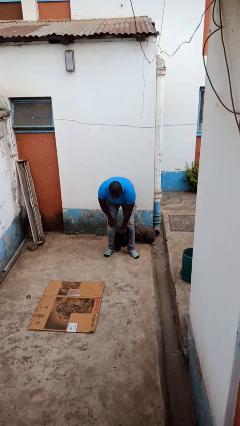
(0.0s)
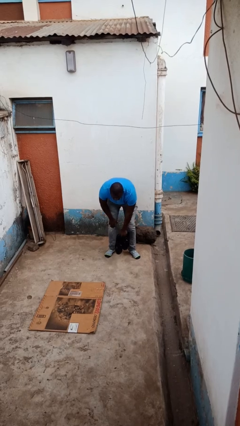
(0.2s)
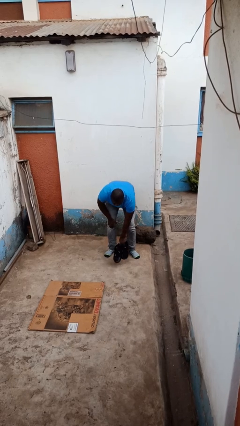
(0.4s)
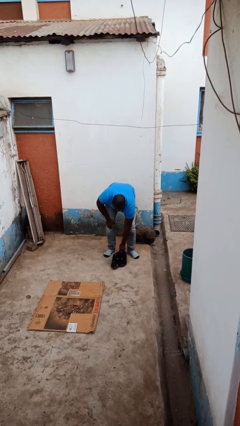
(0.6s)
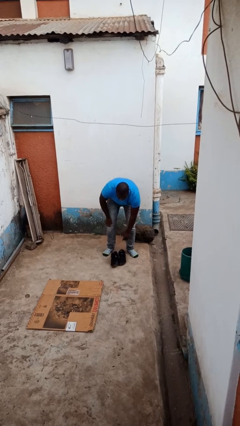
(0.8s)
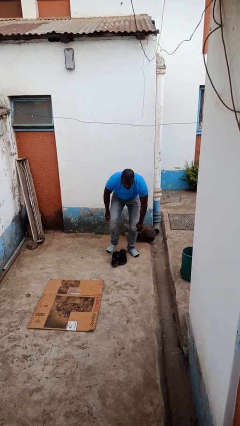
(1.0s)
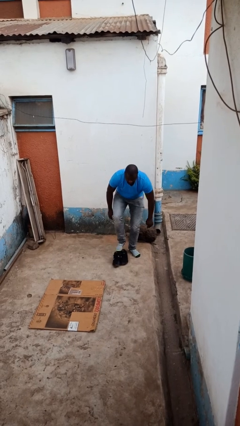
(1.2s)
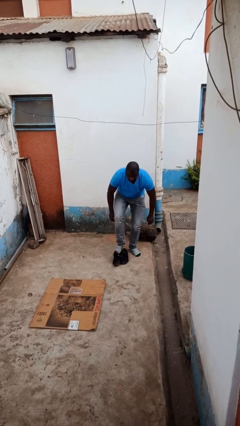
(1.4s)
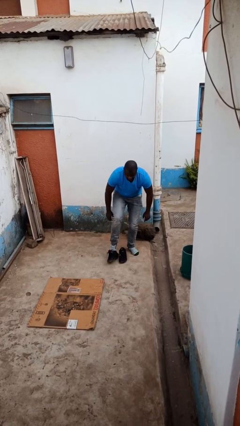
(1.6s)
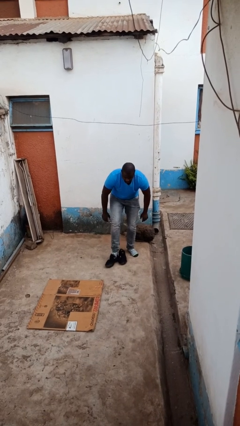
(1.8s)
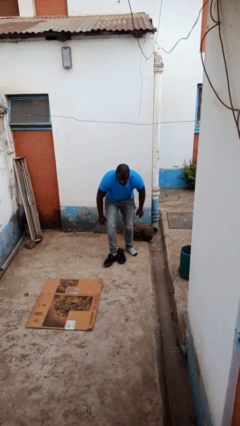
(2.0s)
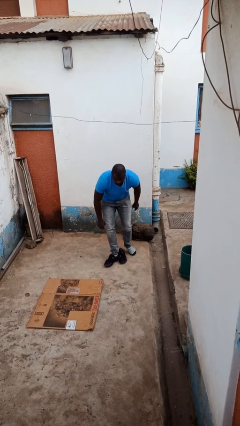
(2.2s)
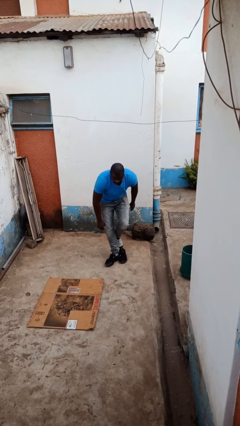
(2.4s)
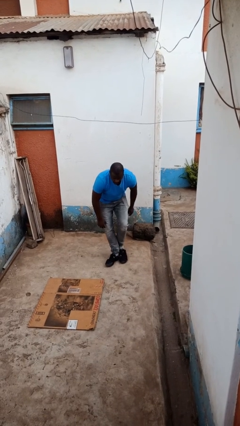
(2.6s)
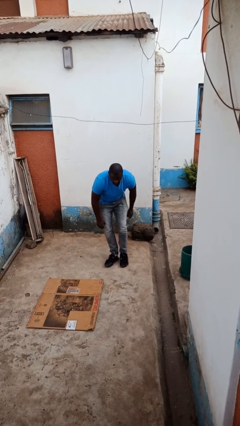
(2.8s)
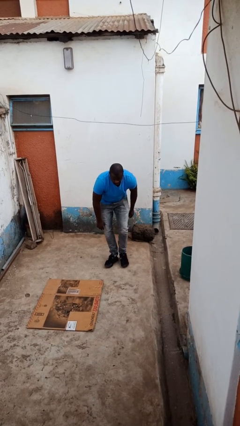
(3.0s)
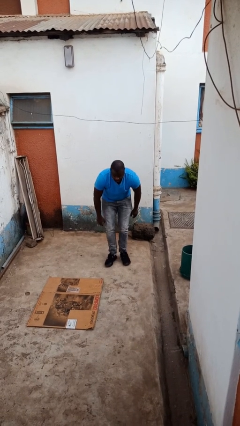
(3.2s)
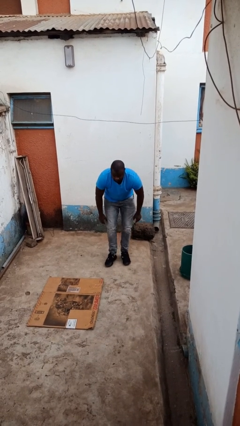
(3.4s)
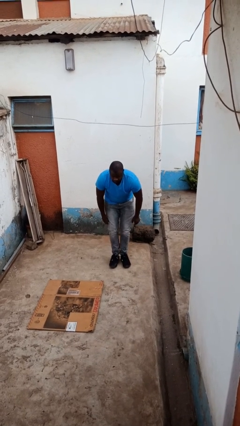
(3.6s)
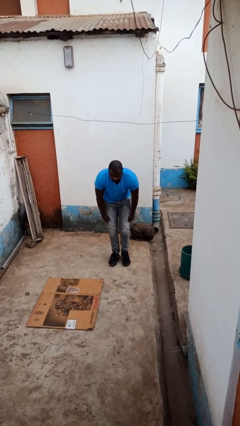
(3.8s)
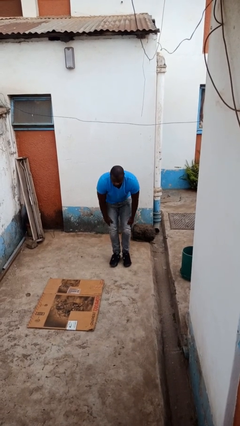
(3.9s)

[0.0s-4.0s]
person puts on shoes

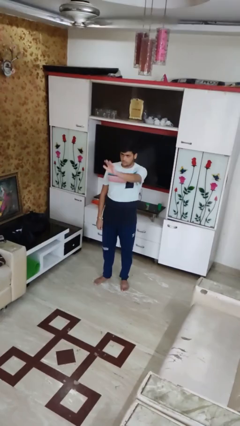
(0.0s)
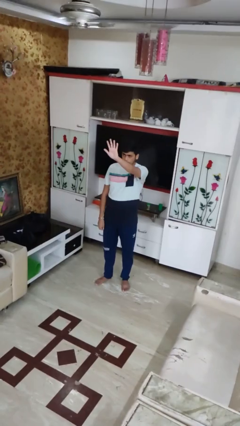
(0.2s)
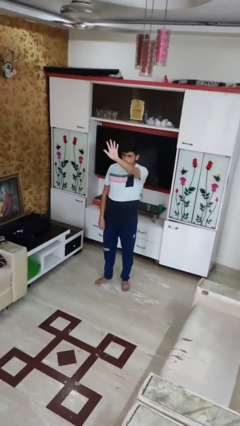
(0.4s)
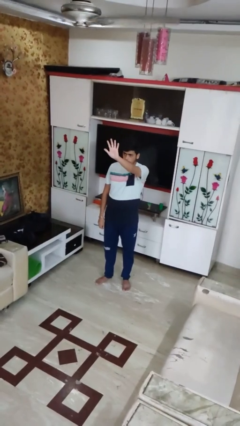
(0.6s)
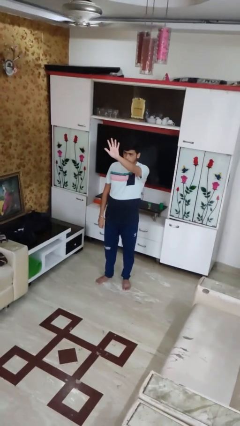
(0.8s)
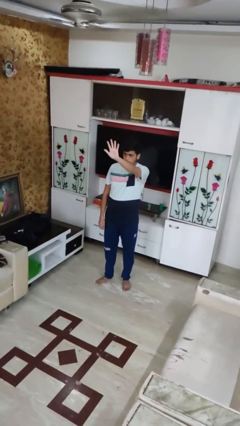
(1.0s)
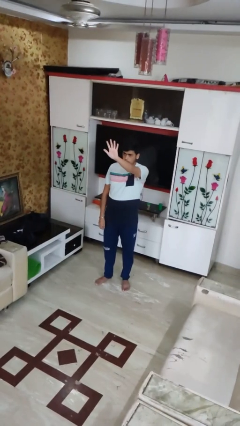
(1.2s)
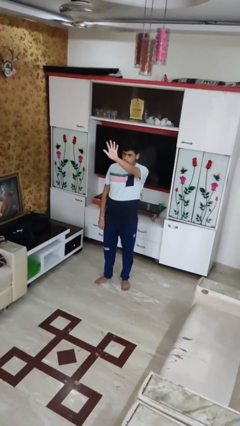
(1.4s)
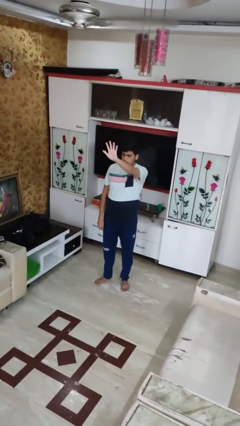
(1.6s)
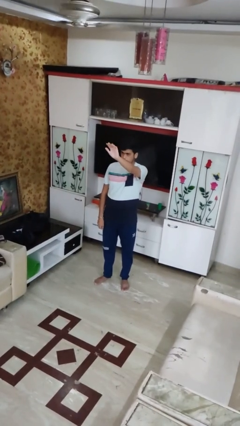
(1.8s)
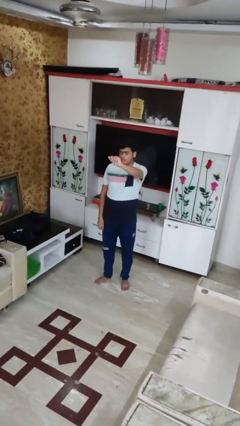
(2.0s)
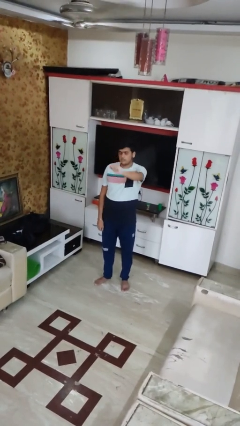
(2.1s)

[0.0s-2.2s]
person gestures number five

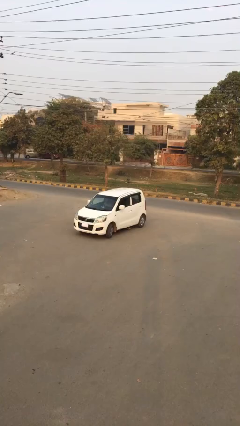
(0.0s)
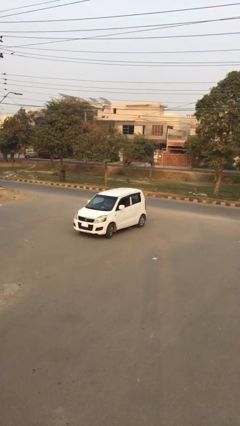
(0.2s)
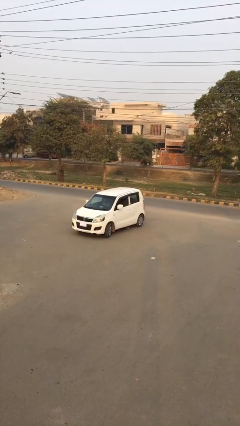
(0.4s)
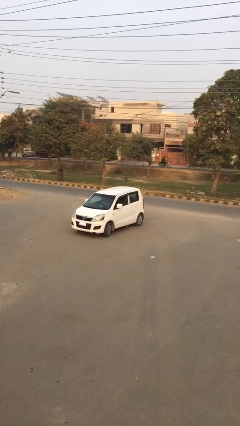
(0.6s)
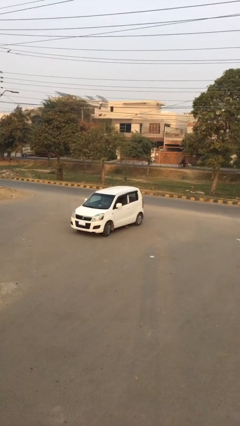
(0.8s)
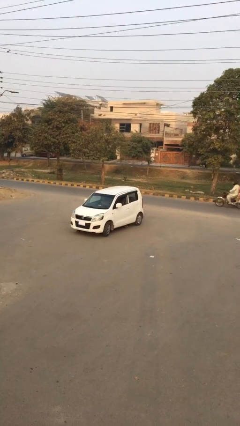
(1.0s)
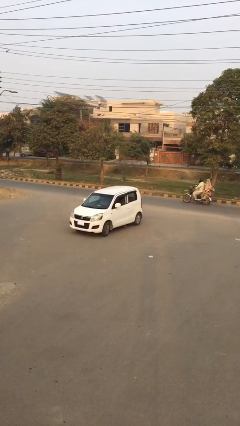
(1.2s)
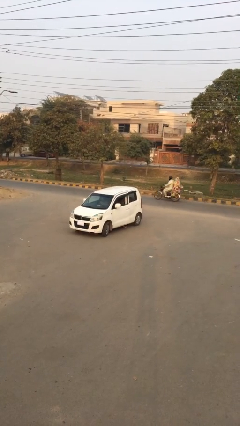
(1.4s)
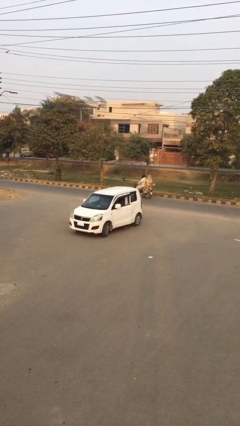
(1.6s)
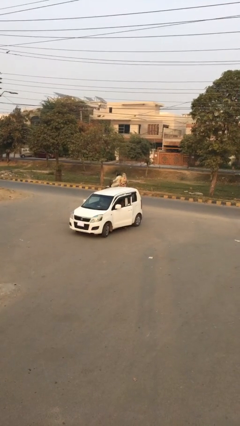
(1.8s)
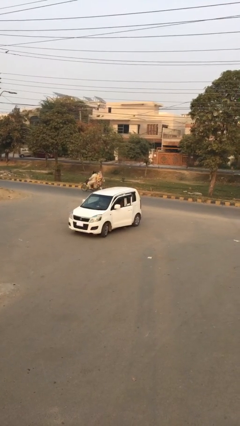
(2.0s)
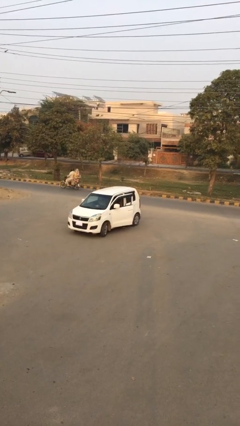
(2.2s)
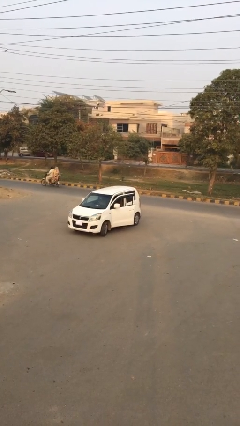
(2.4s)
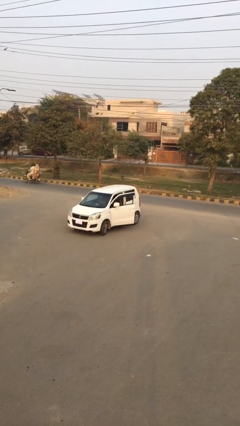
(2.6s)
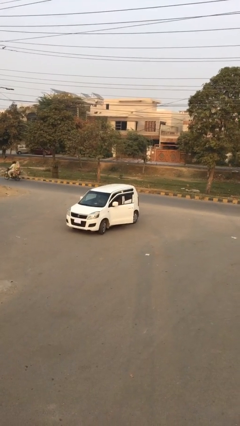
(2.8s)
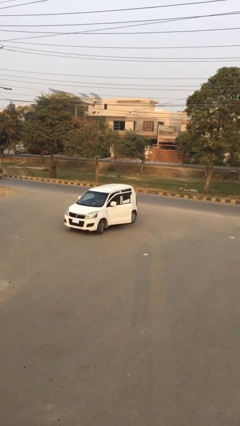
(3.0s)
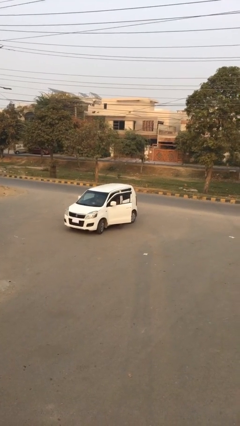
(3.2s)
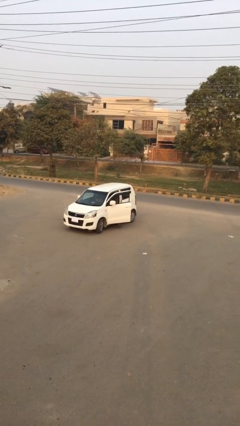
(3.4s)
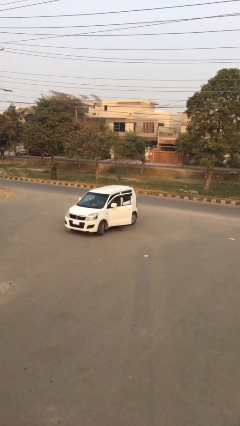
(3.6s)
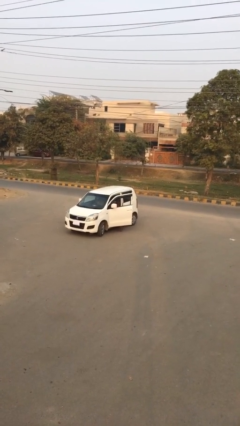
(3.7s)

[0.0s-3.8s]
person opens car door

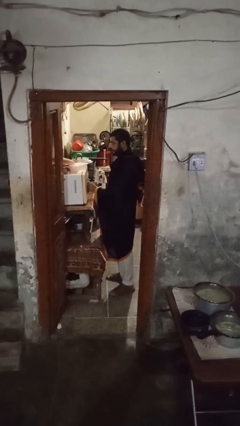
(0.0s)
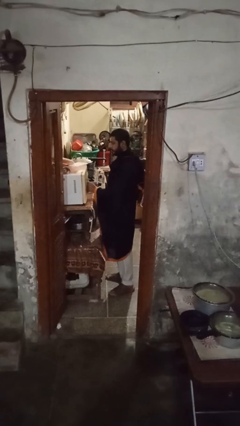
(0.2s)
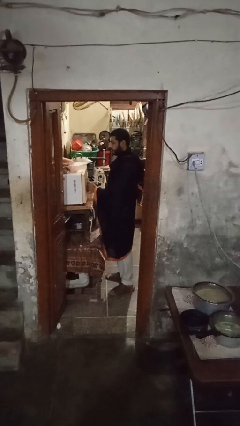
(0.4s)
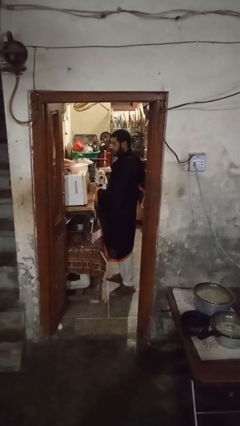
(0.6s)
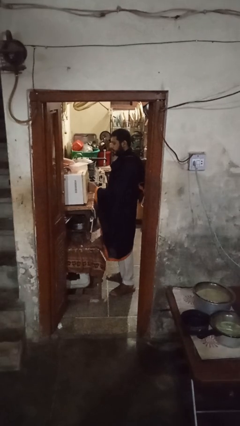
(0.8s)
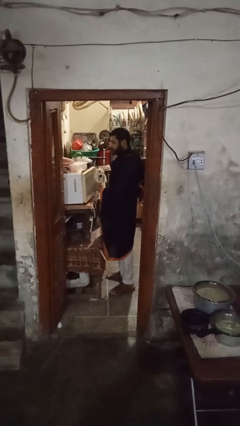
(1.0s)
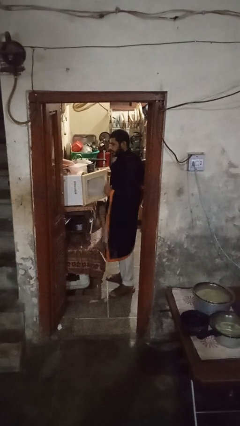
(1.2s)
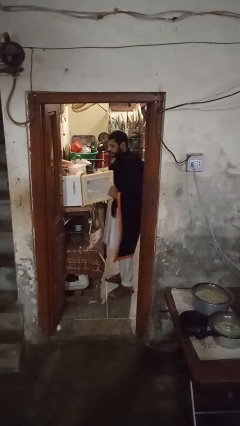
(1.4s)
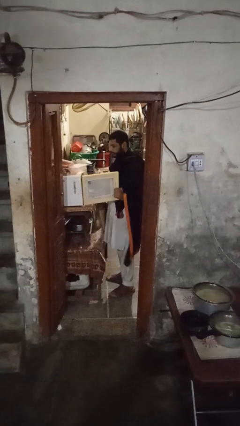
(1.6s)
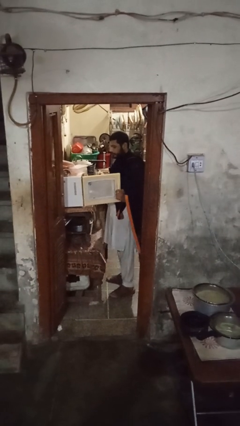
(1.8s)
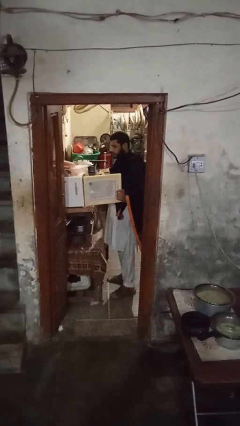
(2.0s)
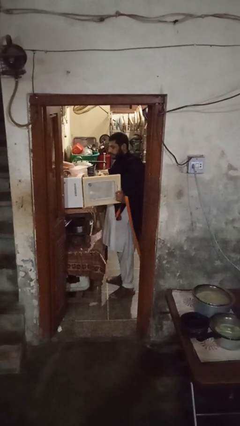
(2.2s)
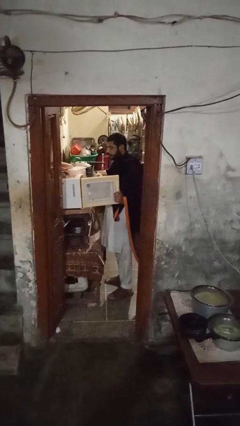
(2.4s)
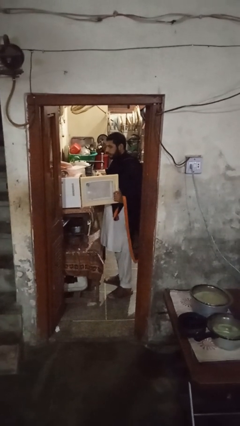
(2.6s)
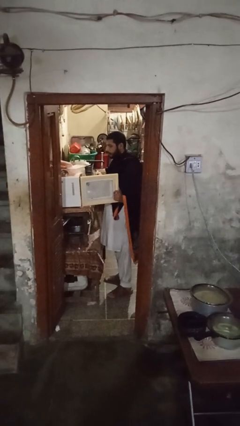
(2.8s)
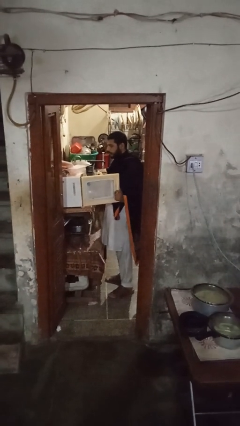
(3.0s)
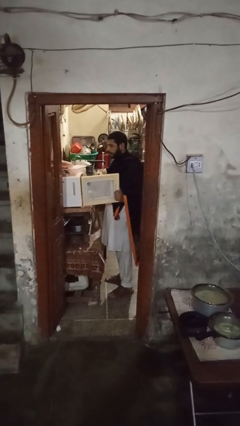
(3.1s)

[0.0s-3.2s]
person opens microwave

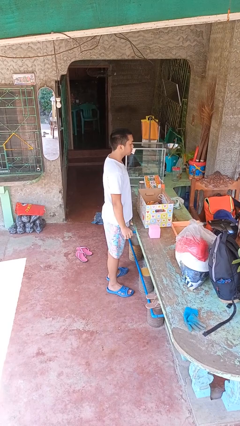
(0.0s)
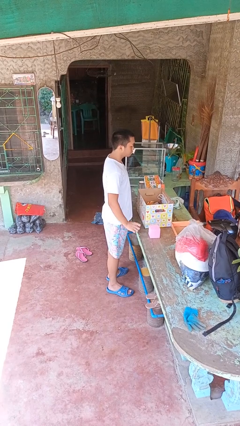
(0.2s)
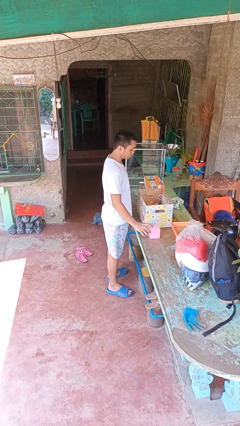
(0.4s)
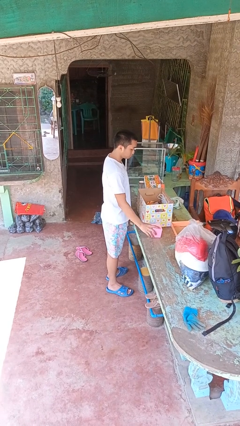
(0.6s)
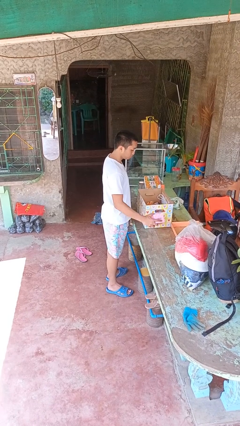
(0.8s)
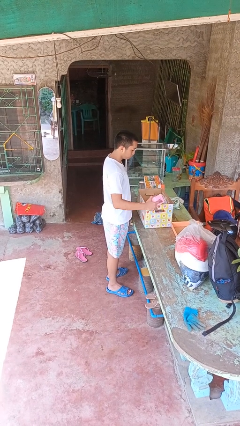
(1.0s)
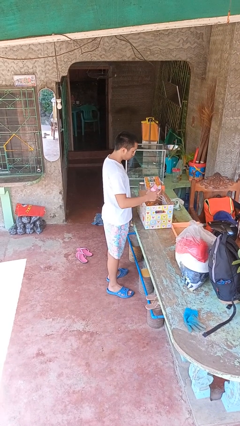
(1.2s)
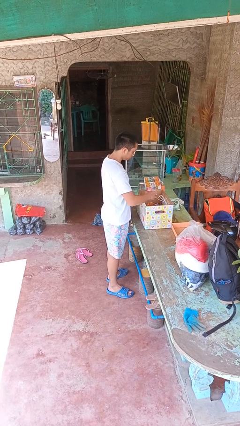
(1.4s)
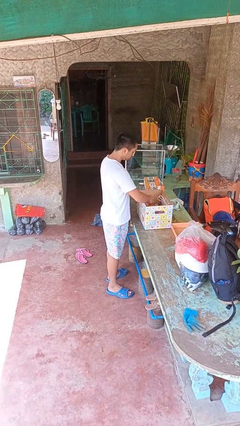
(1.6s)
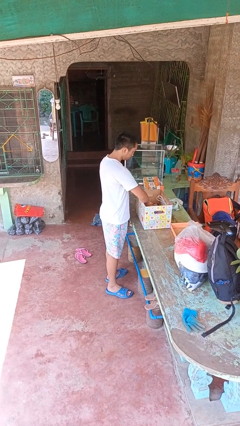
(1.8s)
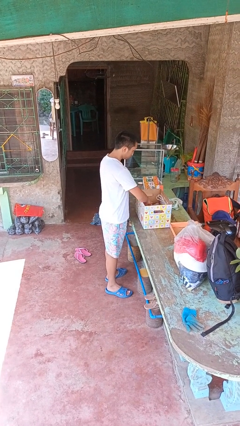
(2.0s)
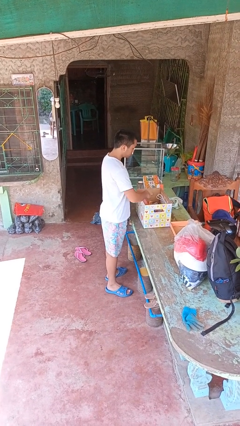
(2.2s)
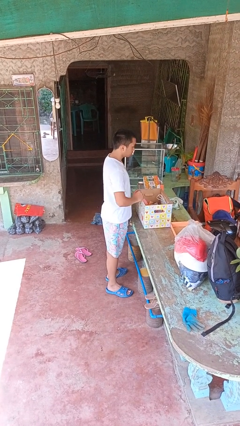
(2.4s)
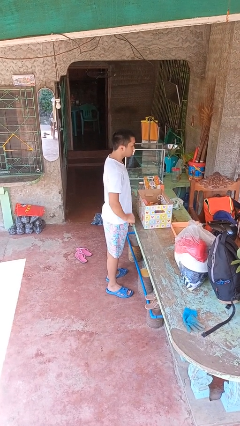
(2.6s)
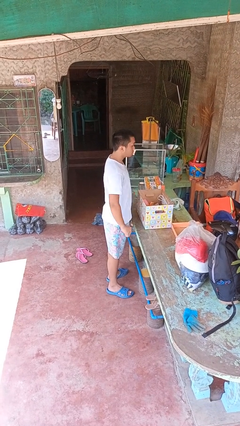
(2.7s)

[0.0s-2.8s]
person puts object into box

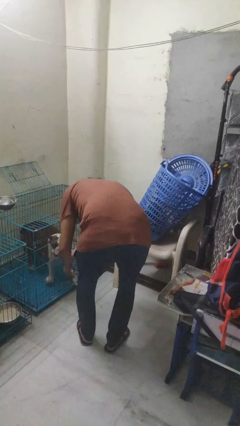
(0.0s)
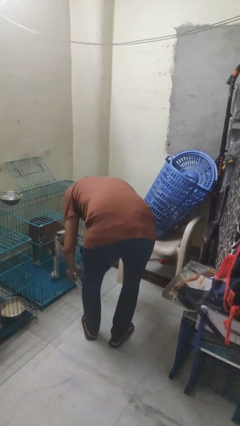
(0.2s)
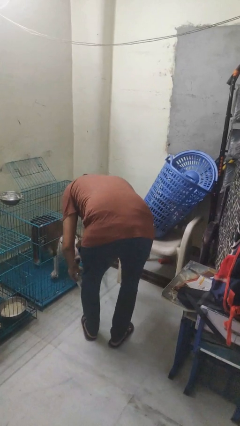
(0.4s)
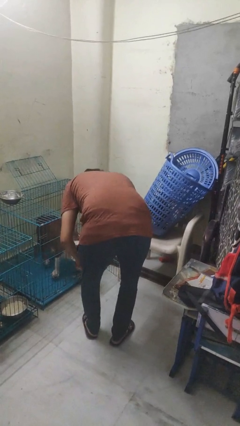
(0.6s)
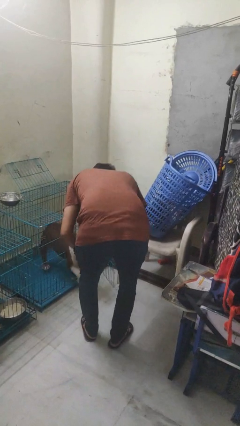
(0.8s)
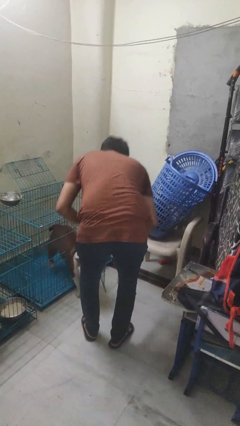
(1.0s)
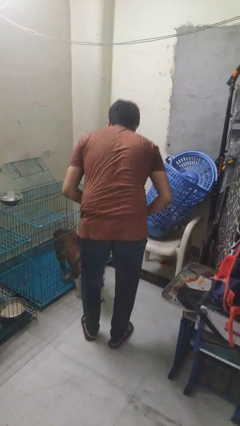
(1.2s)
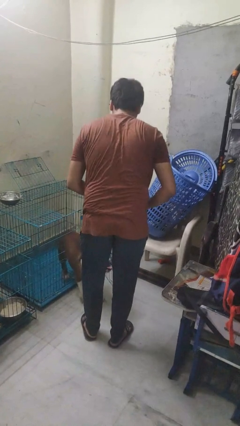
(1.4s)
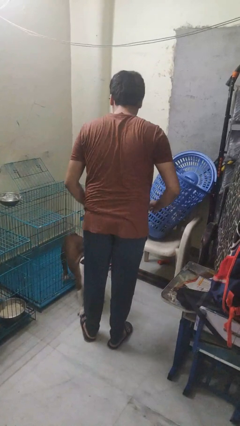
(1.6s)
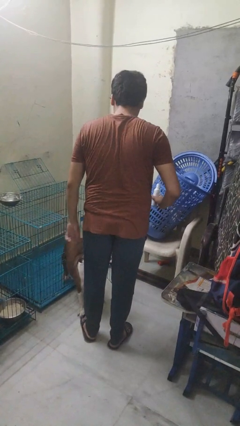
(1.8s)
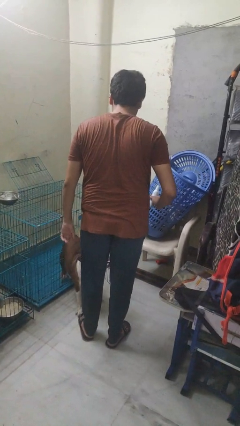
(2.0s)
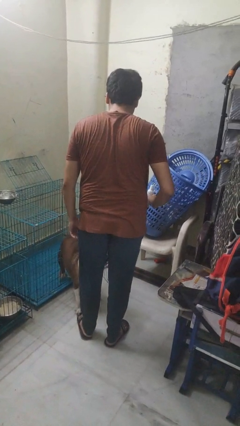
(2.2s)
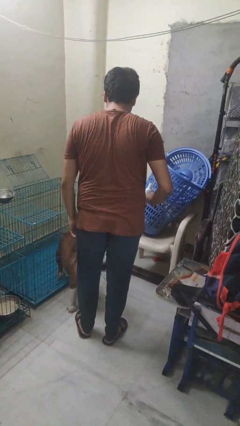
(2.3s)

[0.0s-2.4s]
person uncrates dog
